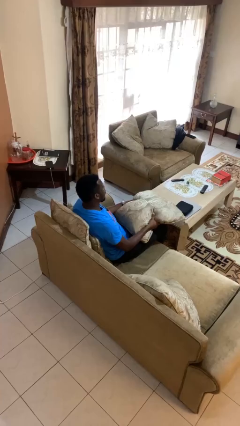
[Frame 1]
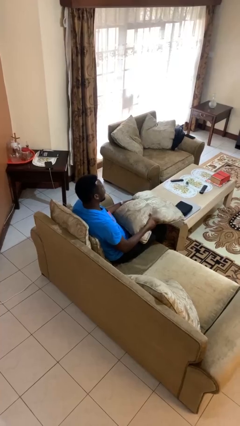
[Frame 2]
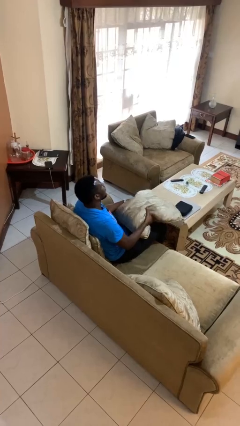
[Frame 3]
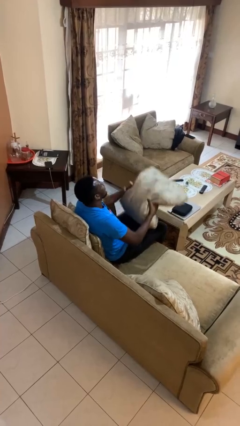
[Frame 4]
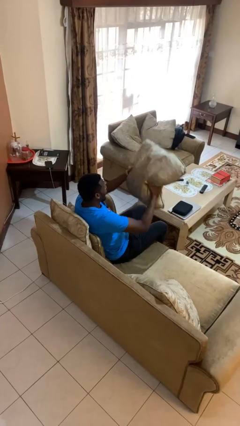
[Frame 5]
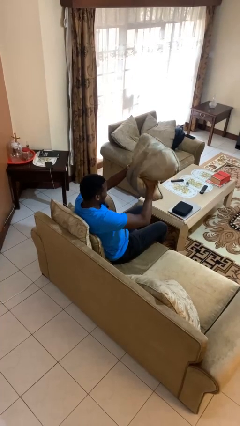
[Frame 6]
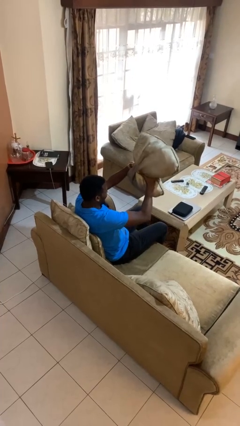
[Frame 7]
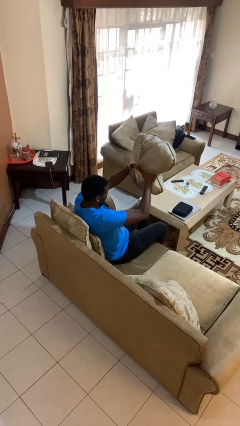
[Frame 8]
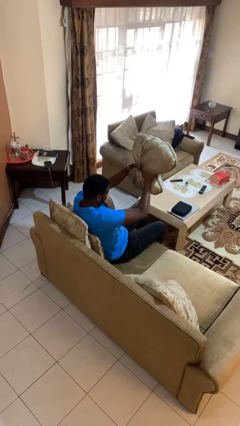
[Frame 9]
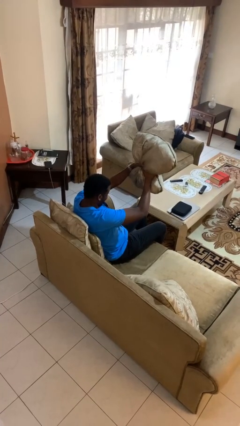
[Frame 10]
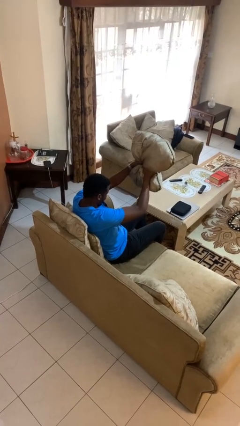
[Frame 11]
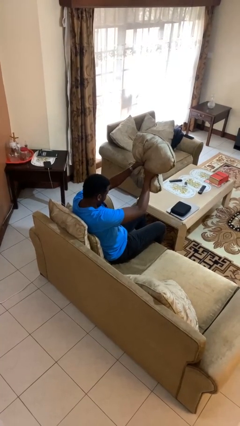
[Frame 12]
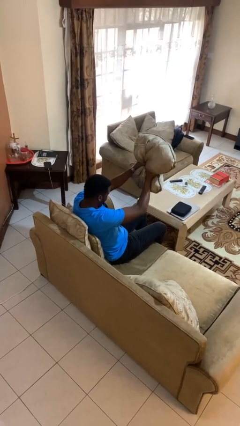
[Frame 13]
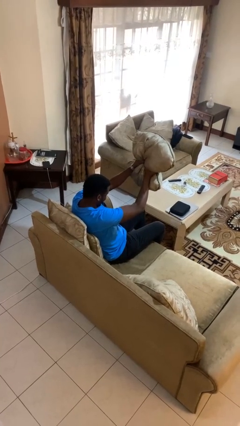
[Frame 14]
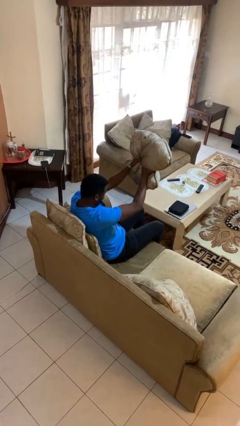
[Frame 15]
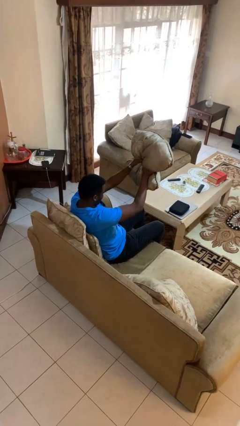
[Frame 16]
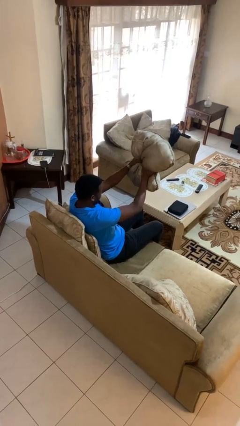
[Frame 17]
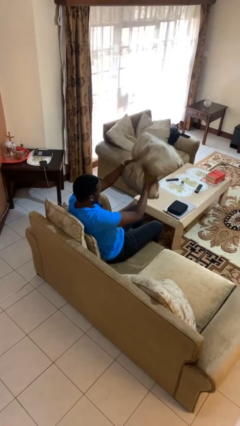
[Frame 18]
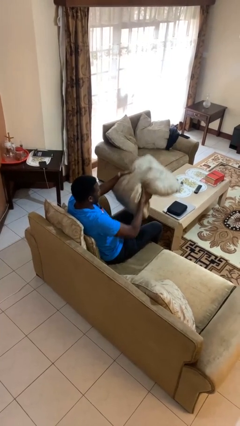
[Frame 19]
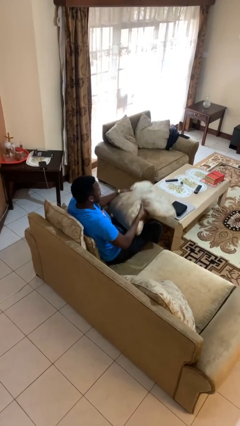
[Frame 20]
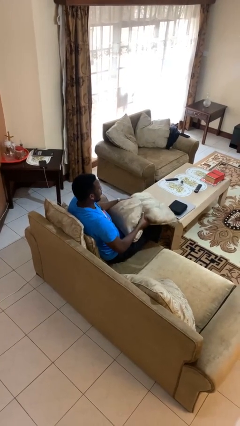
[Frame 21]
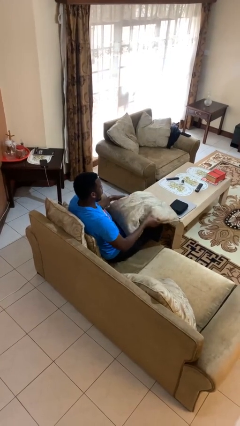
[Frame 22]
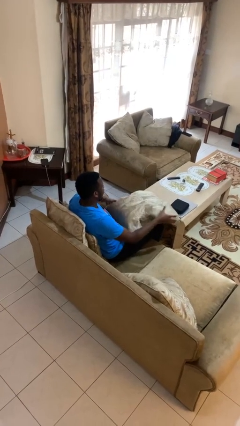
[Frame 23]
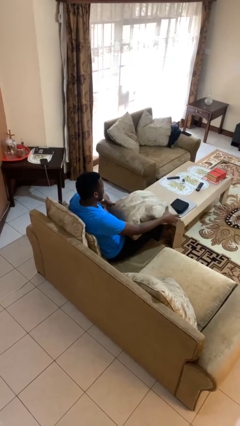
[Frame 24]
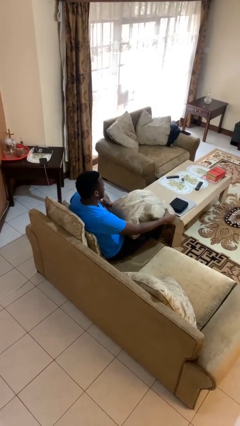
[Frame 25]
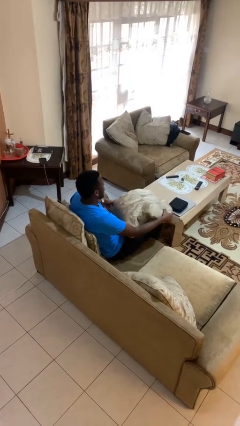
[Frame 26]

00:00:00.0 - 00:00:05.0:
person squeezes object

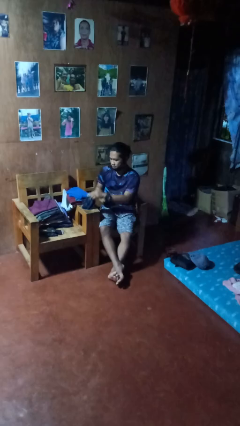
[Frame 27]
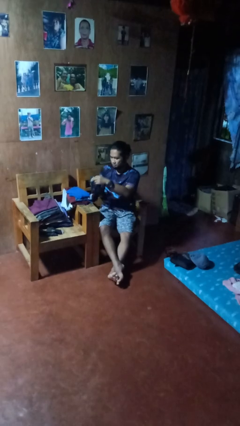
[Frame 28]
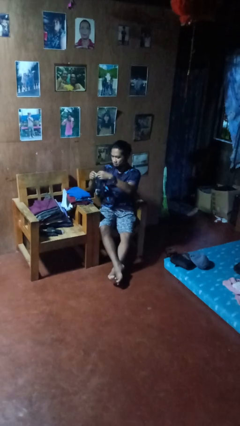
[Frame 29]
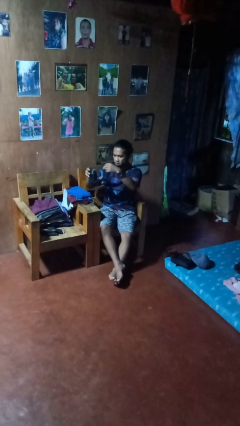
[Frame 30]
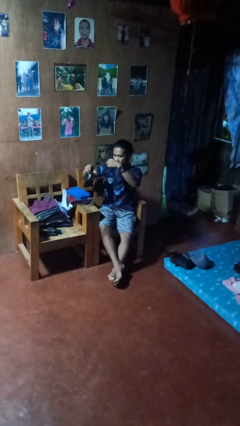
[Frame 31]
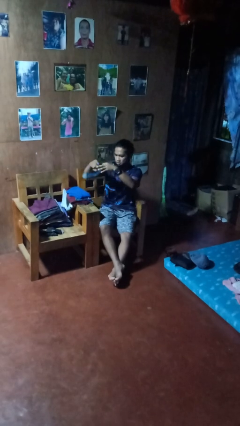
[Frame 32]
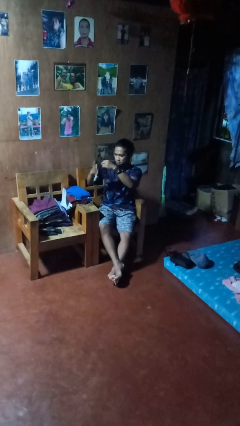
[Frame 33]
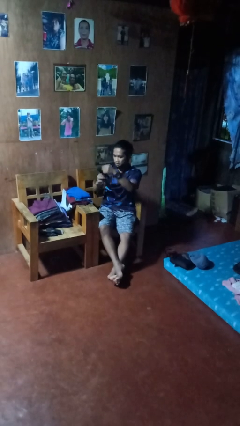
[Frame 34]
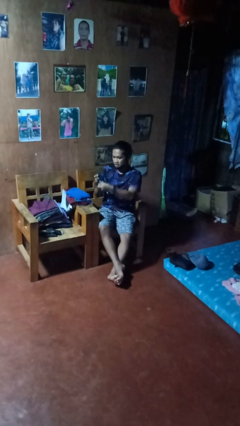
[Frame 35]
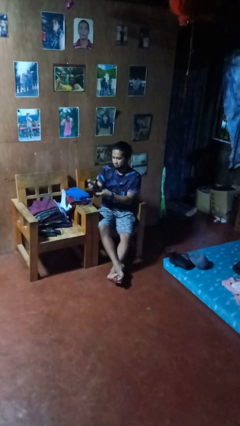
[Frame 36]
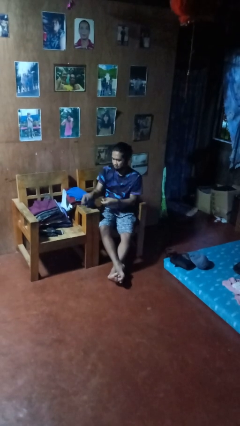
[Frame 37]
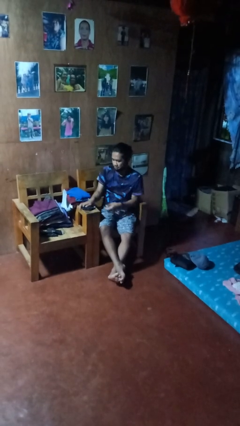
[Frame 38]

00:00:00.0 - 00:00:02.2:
person folds socks

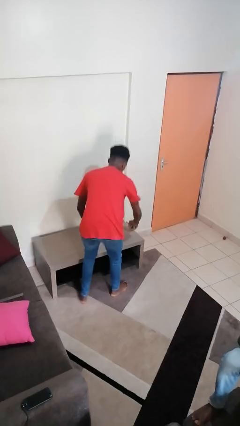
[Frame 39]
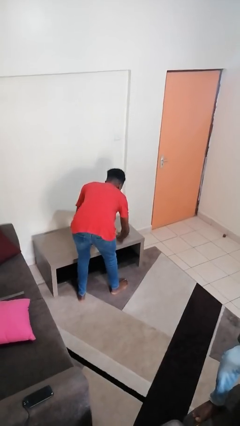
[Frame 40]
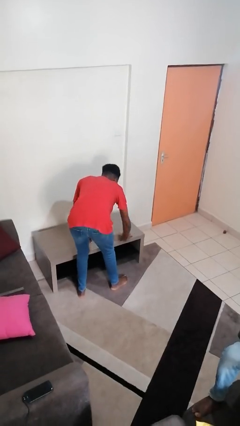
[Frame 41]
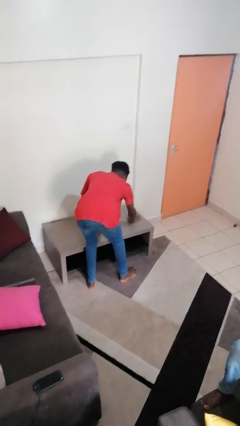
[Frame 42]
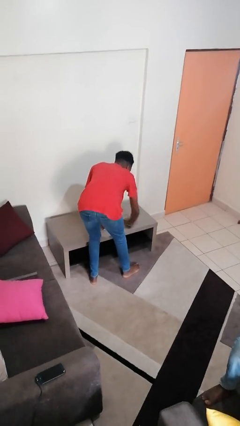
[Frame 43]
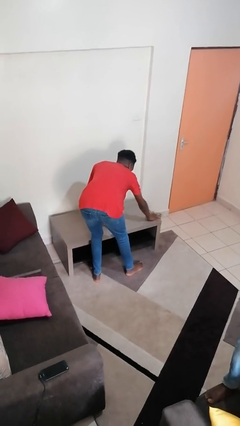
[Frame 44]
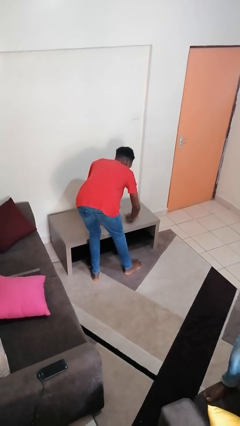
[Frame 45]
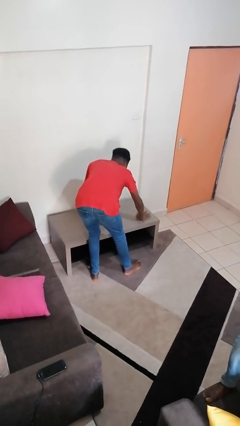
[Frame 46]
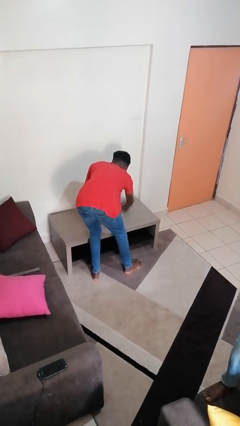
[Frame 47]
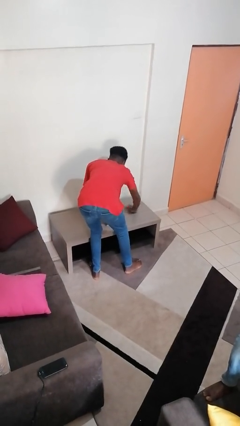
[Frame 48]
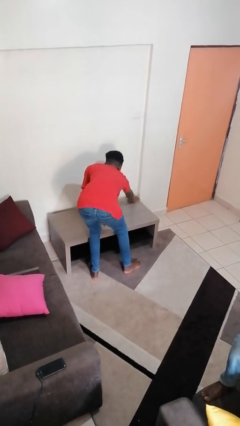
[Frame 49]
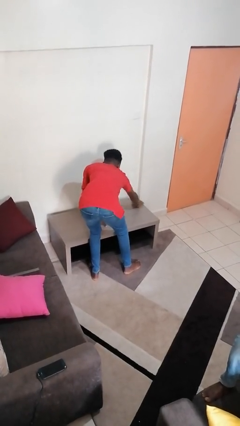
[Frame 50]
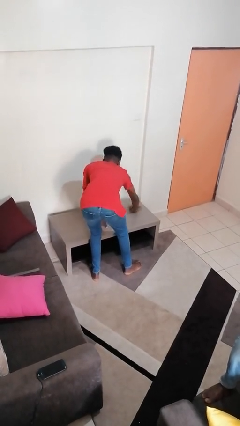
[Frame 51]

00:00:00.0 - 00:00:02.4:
person cleans table with rag

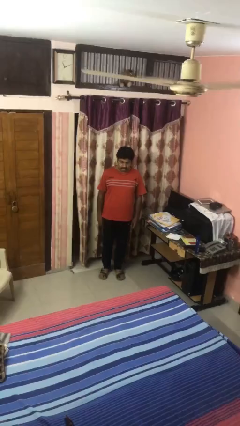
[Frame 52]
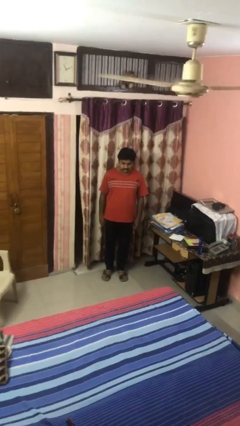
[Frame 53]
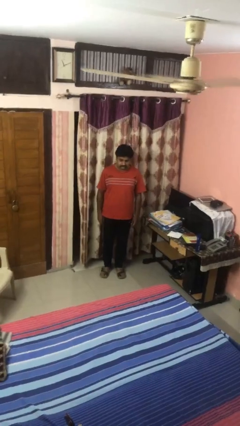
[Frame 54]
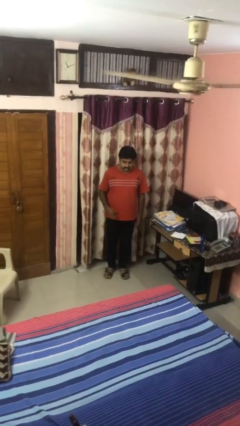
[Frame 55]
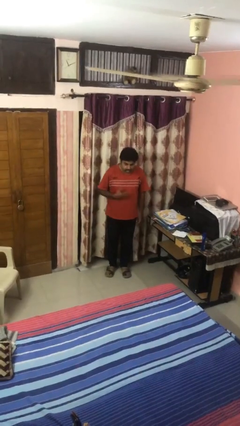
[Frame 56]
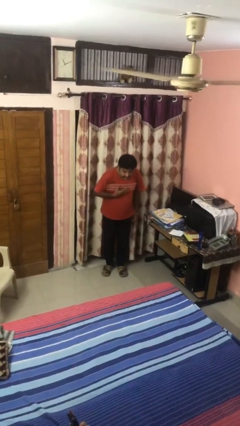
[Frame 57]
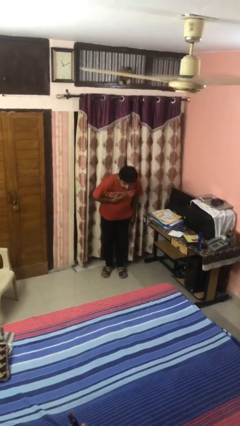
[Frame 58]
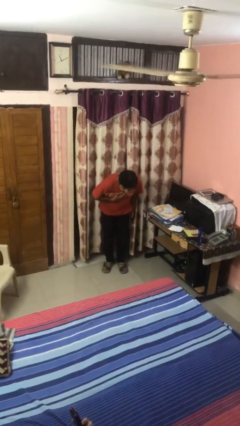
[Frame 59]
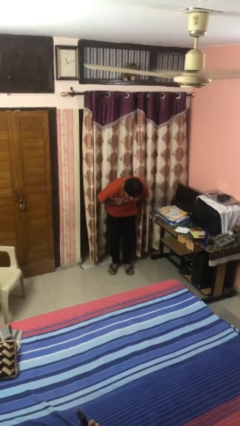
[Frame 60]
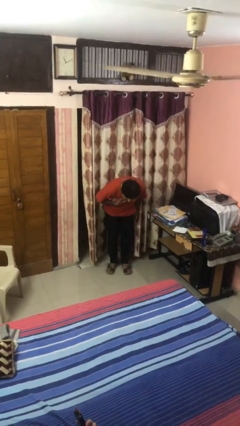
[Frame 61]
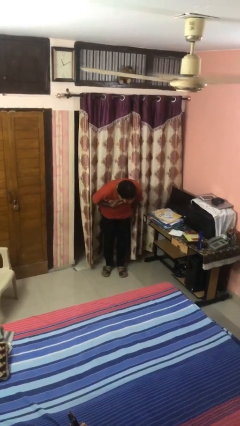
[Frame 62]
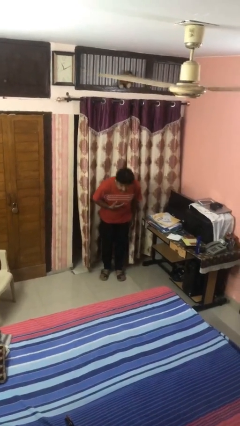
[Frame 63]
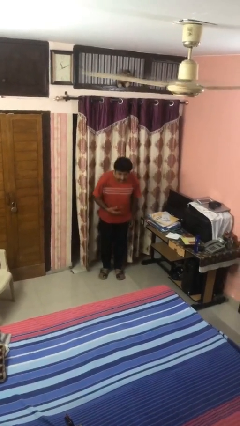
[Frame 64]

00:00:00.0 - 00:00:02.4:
person bows

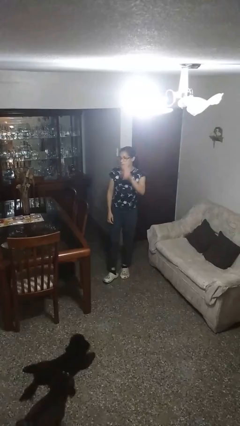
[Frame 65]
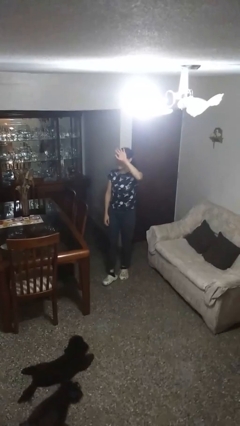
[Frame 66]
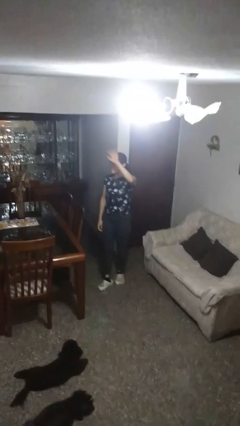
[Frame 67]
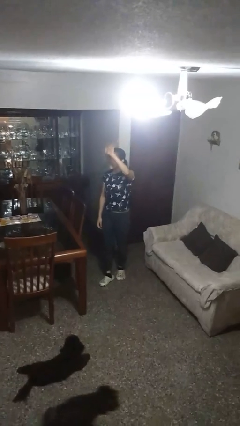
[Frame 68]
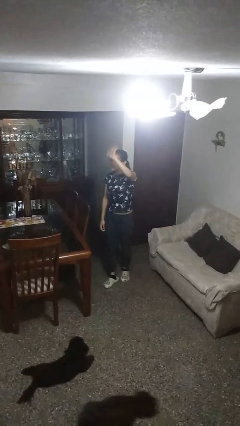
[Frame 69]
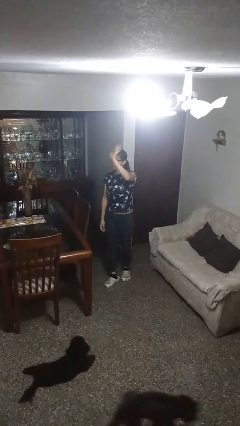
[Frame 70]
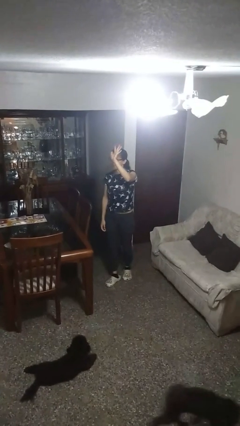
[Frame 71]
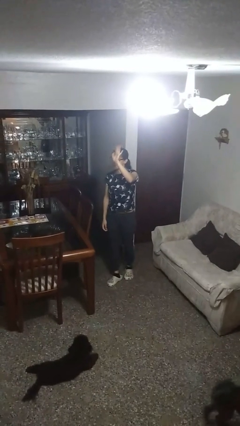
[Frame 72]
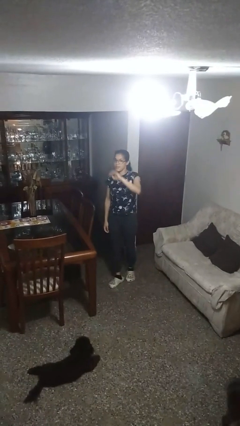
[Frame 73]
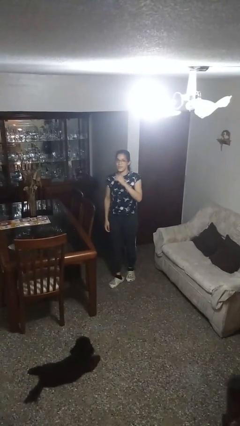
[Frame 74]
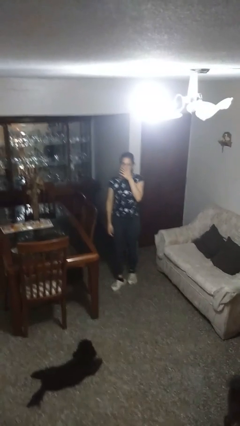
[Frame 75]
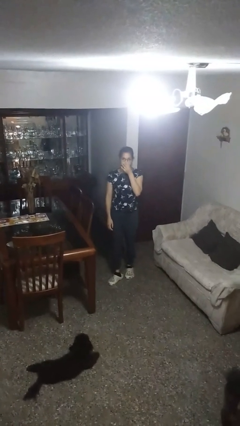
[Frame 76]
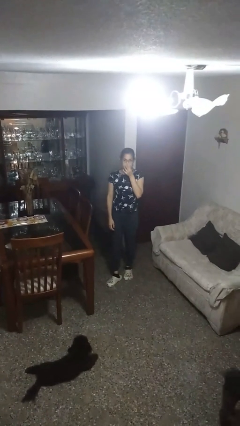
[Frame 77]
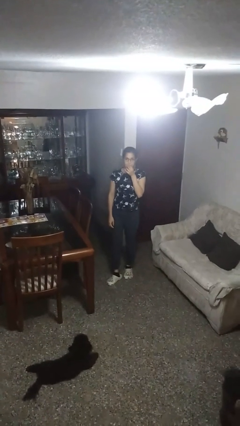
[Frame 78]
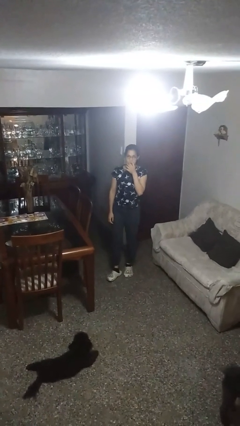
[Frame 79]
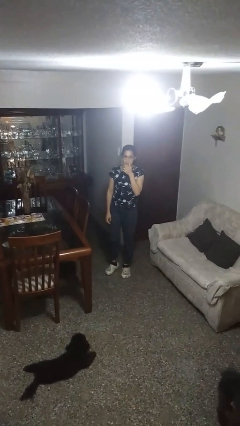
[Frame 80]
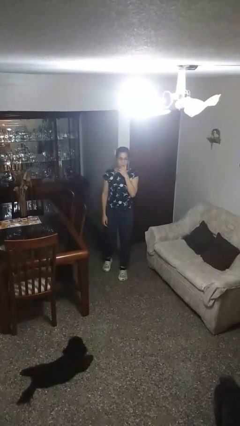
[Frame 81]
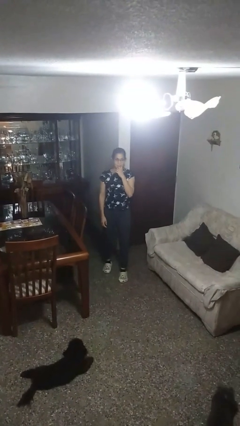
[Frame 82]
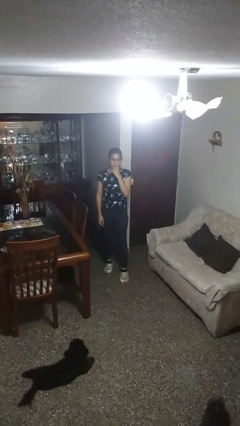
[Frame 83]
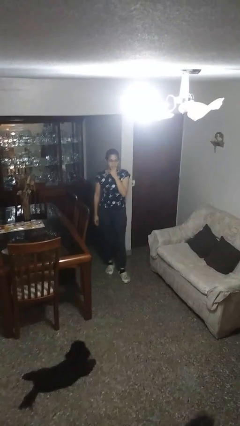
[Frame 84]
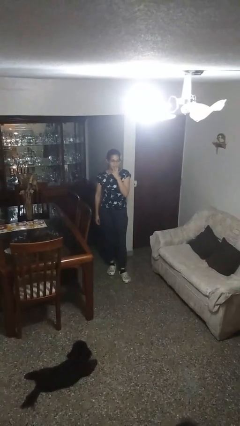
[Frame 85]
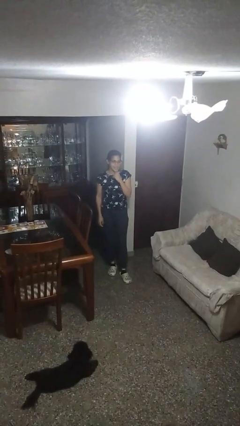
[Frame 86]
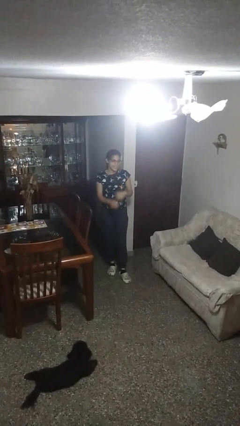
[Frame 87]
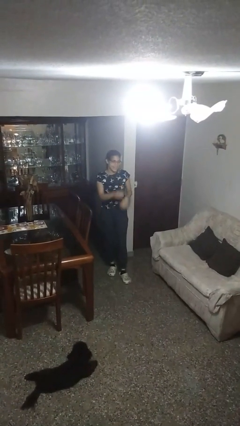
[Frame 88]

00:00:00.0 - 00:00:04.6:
person waves at person

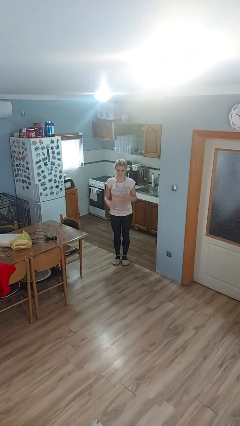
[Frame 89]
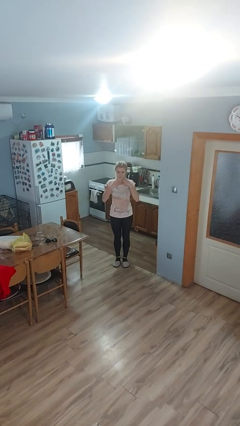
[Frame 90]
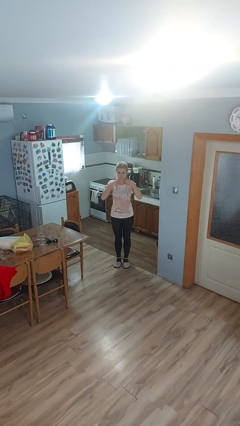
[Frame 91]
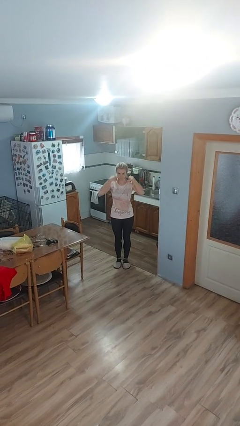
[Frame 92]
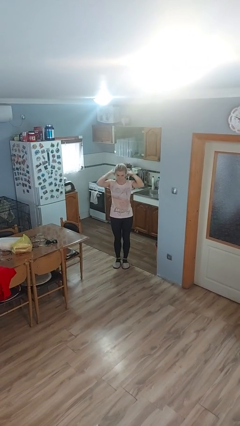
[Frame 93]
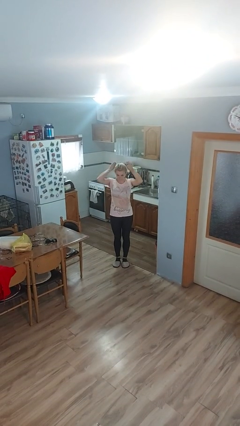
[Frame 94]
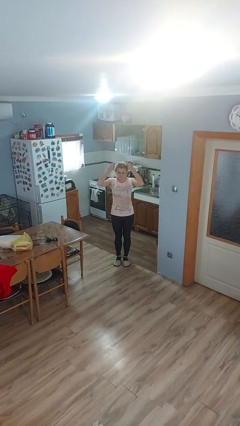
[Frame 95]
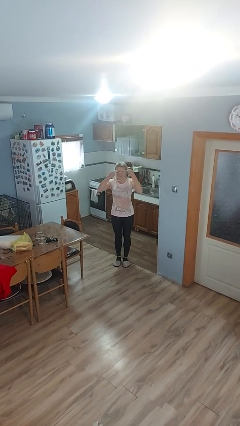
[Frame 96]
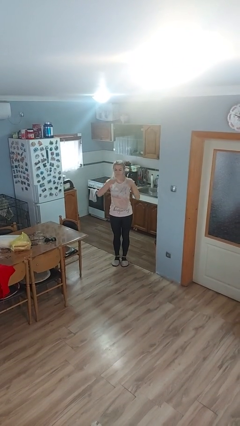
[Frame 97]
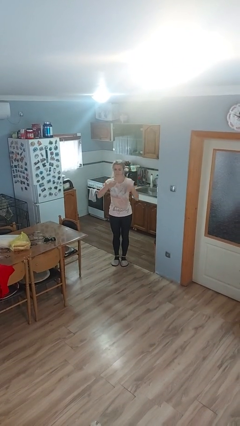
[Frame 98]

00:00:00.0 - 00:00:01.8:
person takes off necklace
